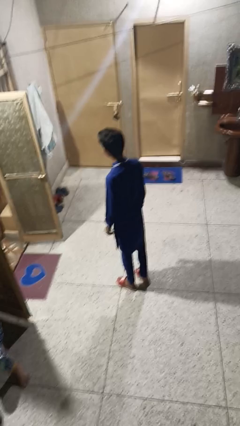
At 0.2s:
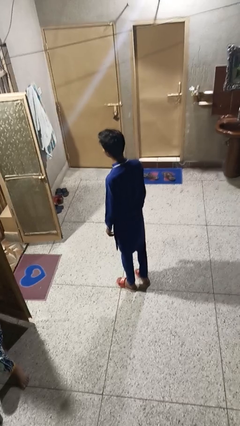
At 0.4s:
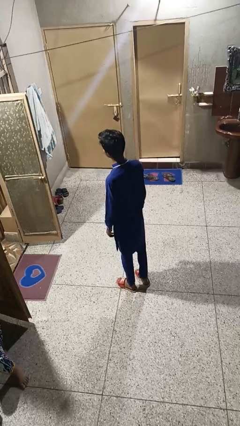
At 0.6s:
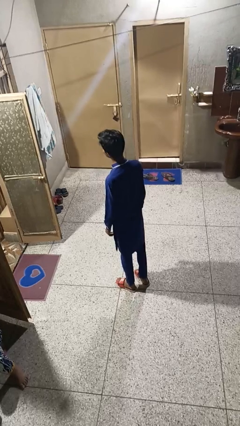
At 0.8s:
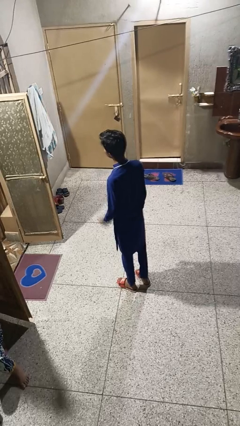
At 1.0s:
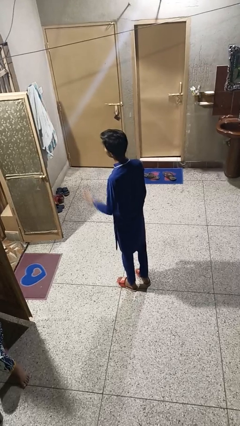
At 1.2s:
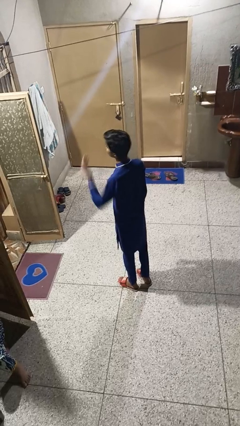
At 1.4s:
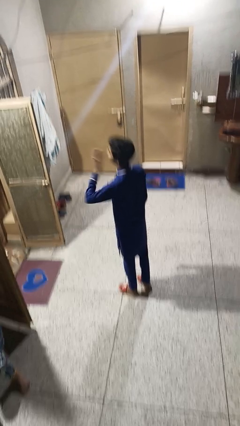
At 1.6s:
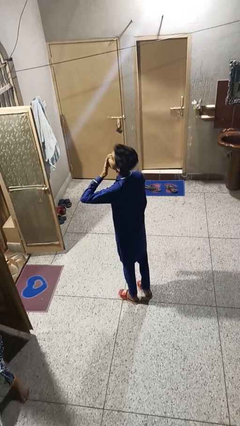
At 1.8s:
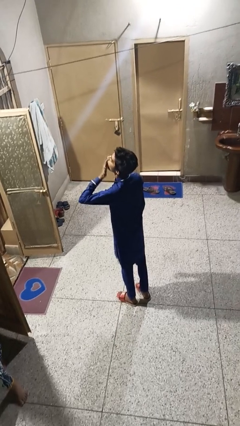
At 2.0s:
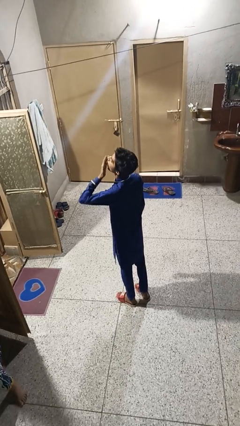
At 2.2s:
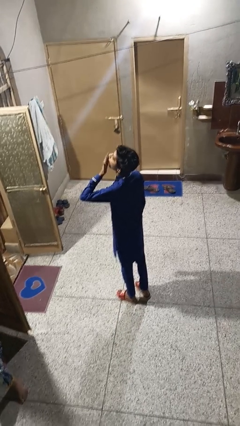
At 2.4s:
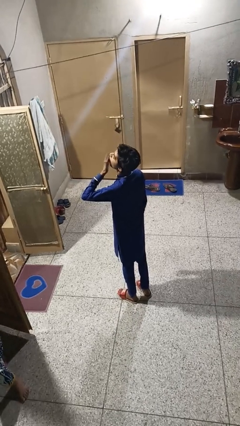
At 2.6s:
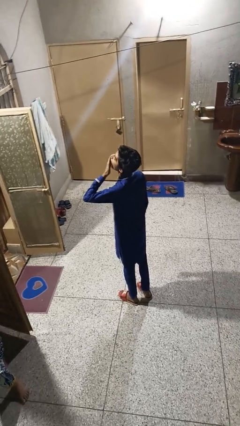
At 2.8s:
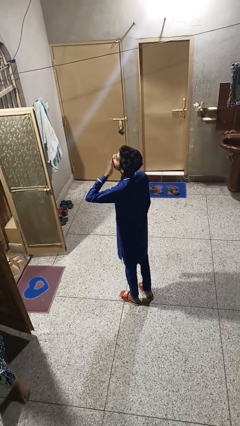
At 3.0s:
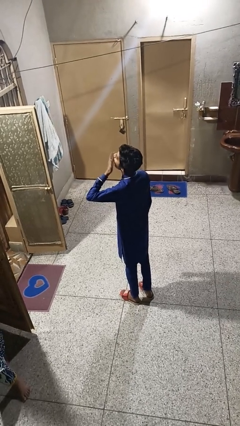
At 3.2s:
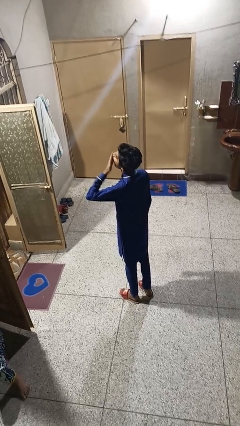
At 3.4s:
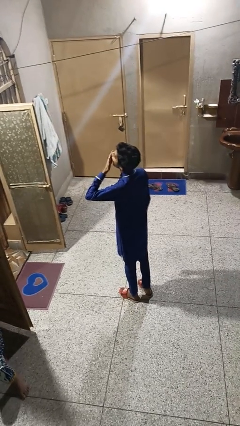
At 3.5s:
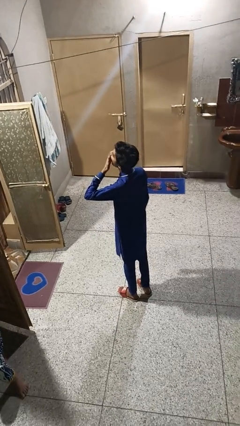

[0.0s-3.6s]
person yawns

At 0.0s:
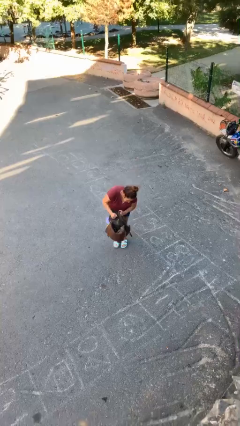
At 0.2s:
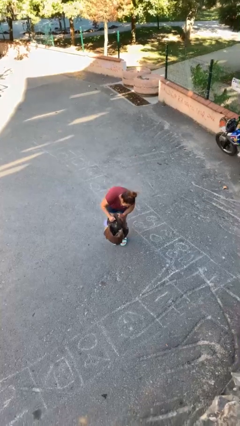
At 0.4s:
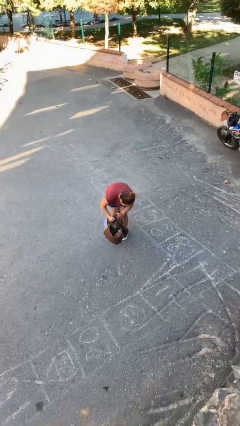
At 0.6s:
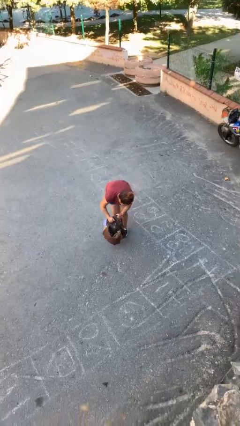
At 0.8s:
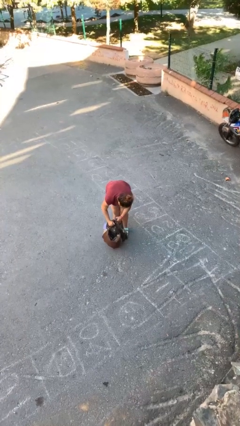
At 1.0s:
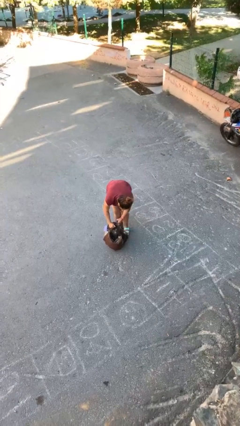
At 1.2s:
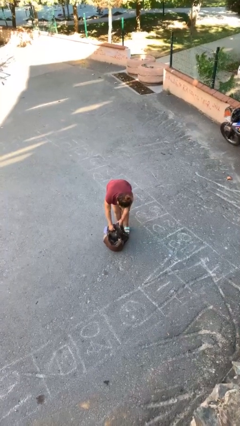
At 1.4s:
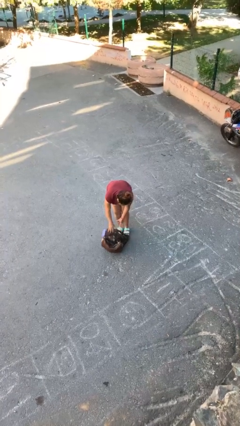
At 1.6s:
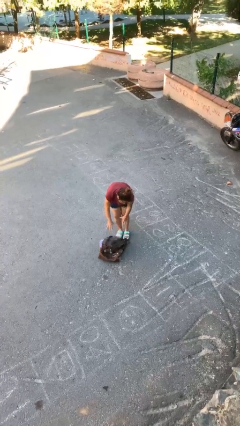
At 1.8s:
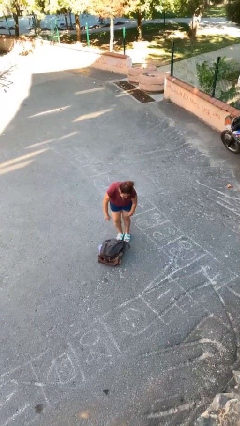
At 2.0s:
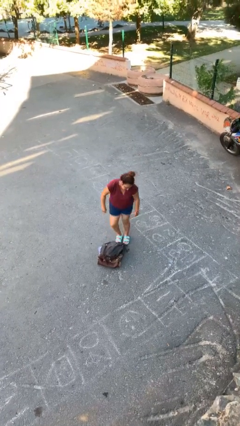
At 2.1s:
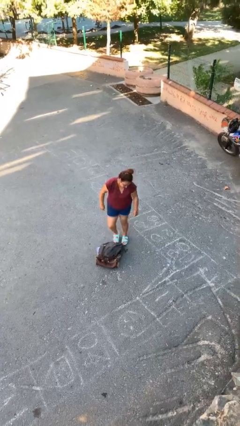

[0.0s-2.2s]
person puts down object on floor

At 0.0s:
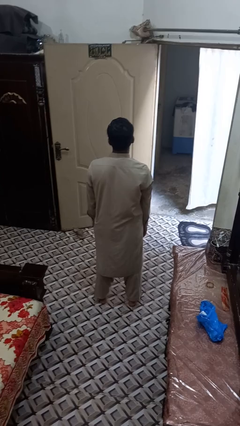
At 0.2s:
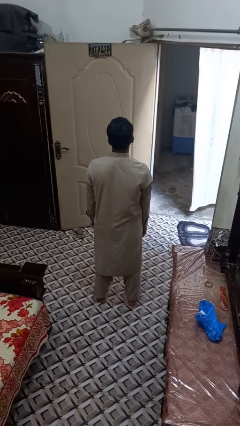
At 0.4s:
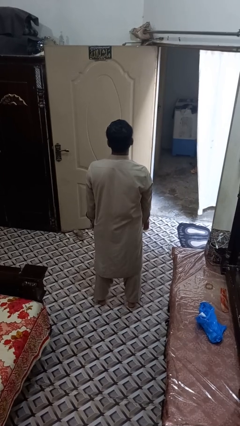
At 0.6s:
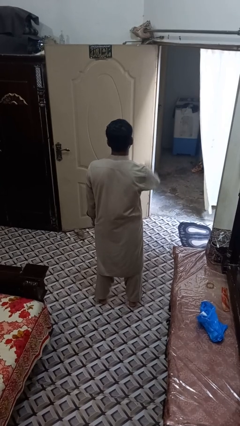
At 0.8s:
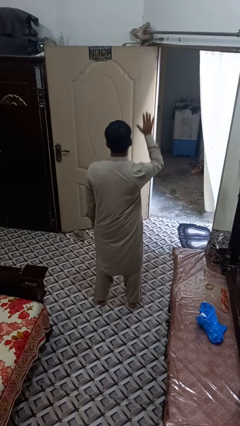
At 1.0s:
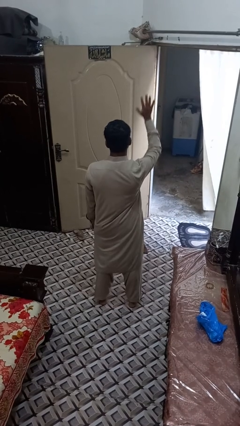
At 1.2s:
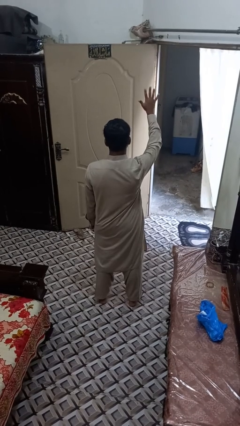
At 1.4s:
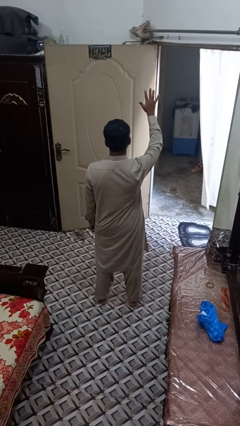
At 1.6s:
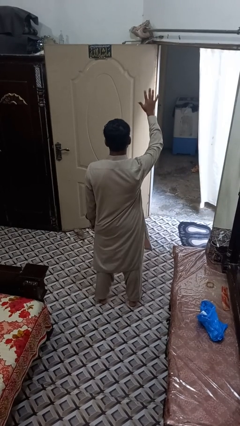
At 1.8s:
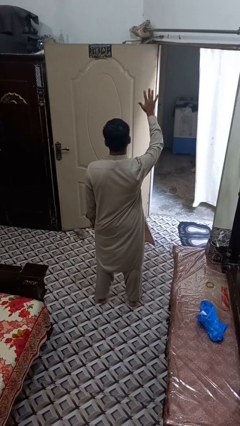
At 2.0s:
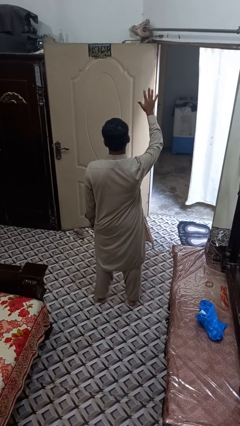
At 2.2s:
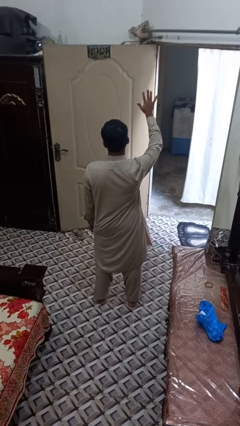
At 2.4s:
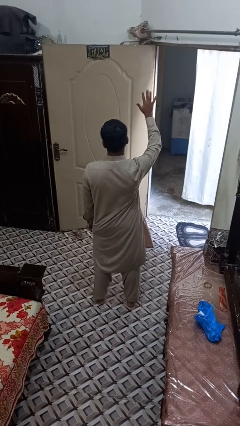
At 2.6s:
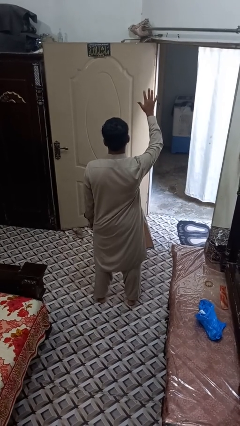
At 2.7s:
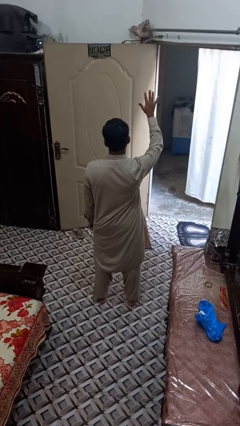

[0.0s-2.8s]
person gestures number five

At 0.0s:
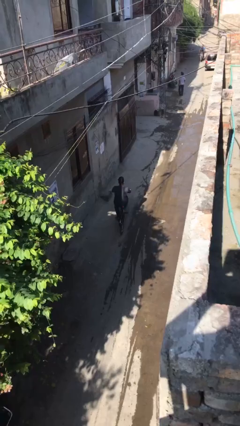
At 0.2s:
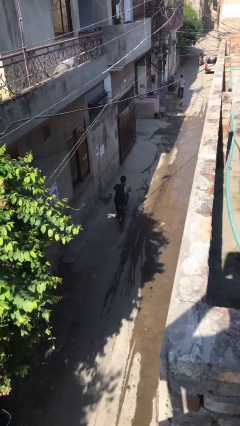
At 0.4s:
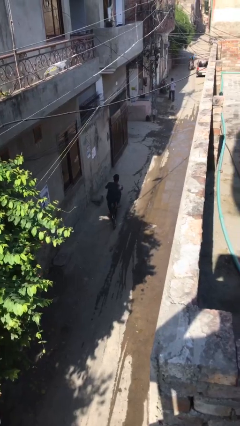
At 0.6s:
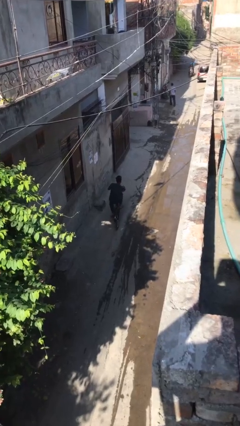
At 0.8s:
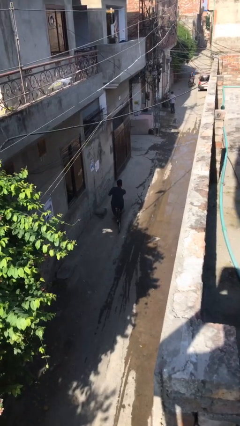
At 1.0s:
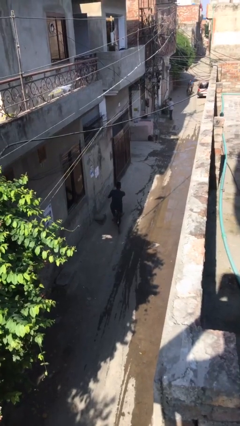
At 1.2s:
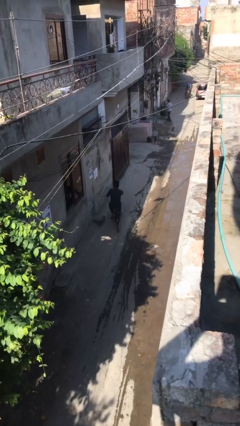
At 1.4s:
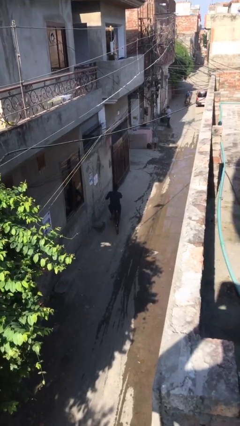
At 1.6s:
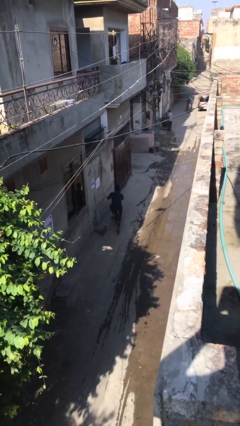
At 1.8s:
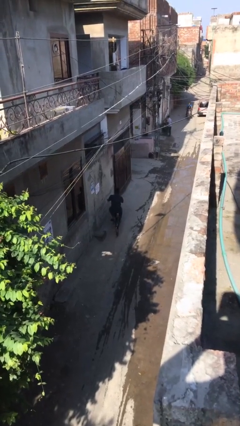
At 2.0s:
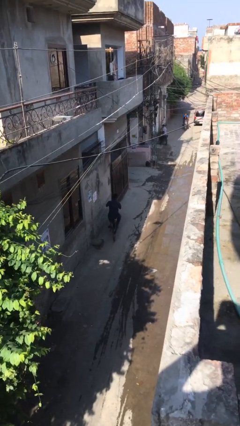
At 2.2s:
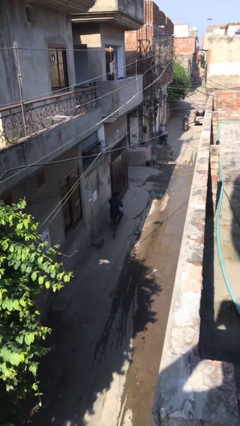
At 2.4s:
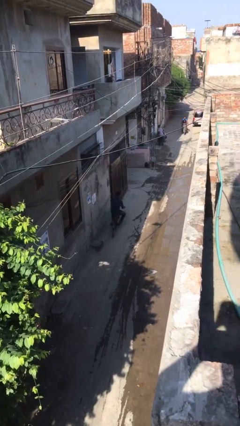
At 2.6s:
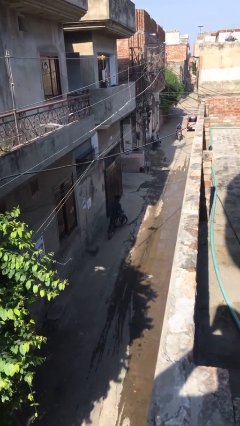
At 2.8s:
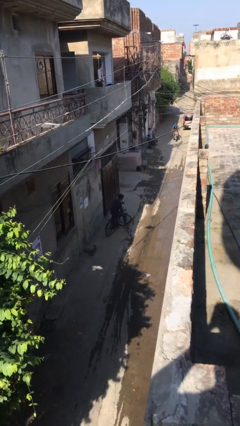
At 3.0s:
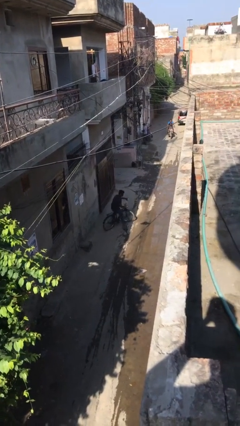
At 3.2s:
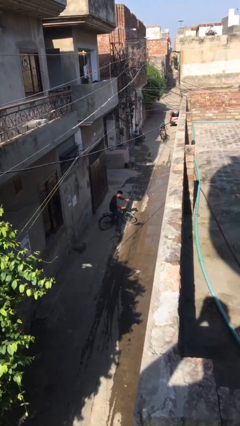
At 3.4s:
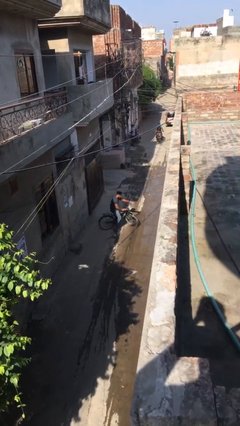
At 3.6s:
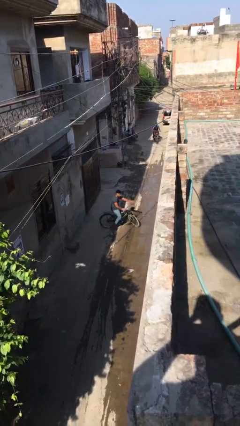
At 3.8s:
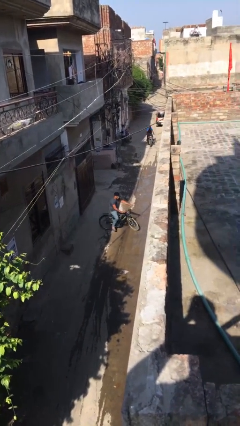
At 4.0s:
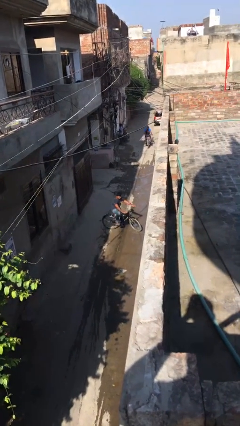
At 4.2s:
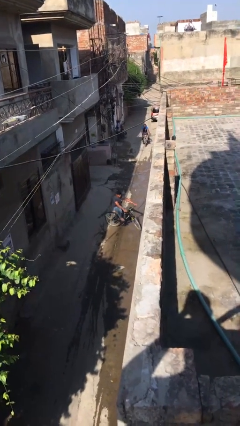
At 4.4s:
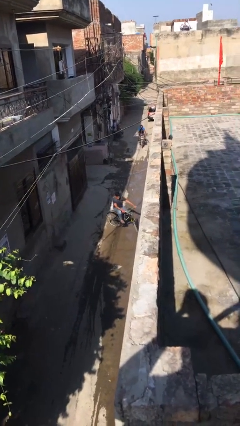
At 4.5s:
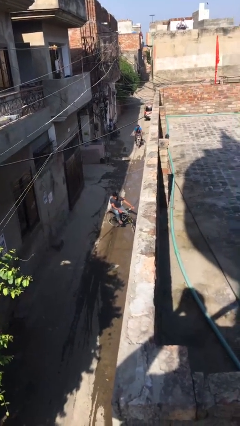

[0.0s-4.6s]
person rides bicycle

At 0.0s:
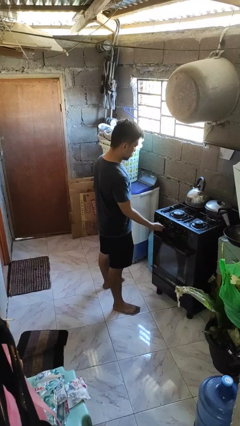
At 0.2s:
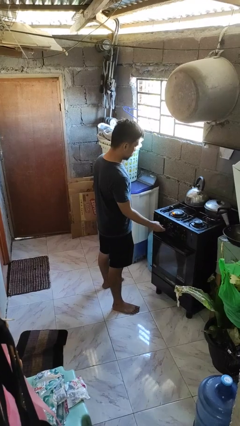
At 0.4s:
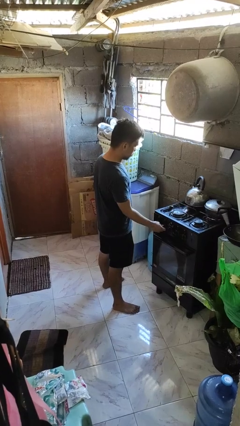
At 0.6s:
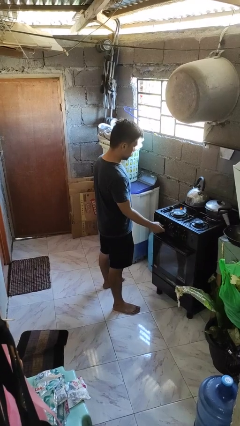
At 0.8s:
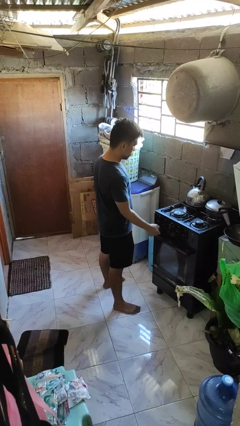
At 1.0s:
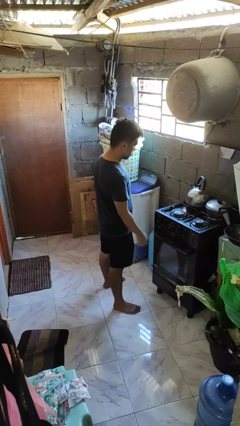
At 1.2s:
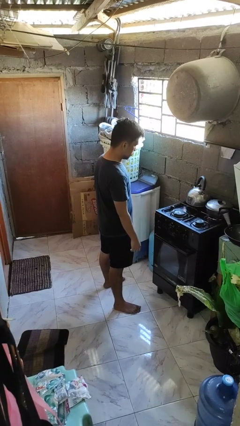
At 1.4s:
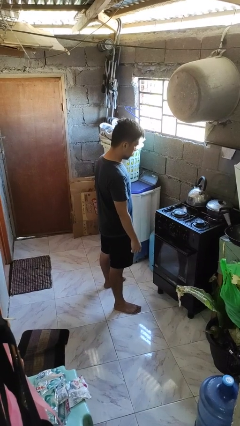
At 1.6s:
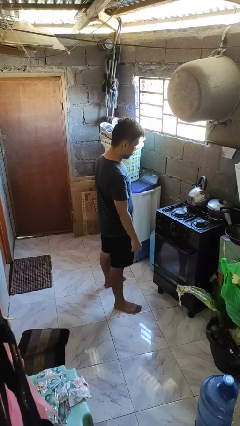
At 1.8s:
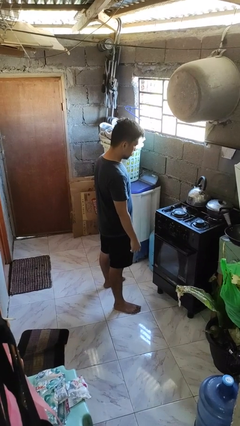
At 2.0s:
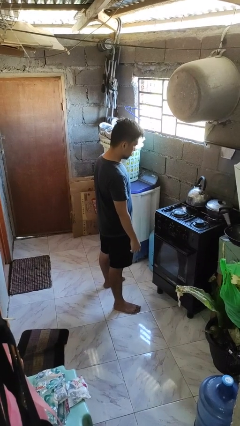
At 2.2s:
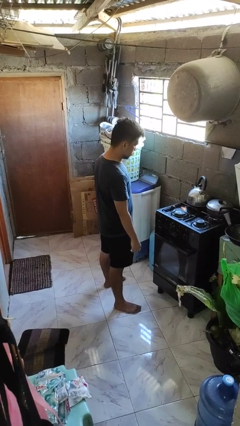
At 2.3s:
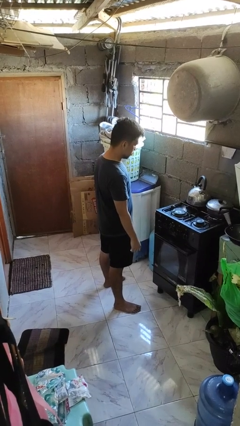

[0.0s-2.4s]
person turns on stovetop

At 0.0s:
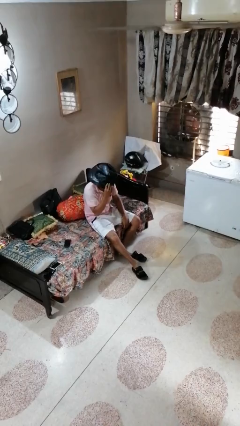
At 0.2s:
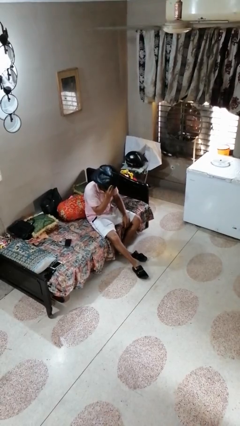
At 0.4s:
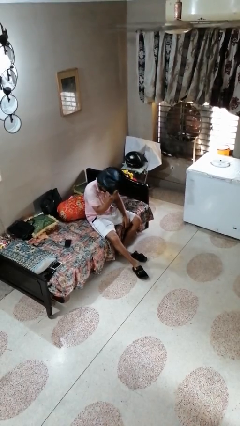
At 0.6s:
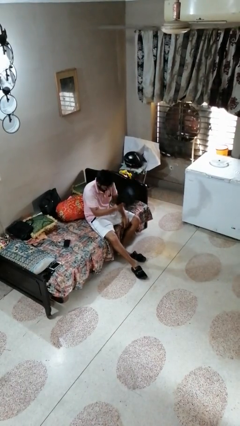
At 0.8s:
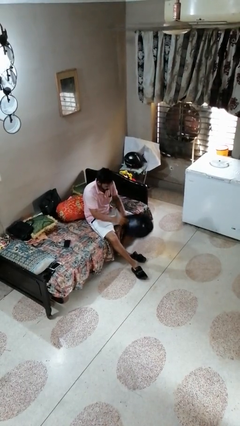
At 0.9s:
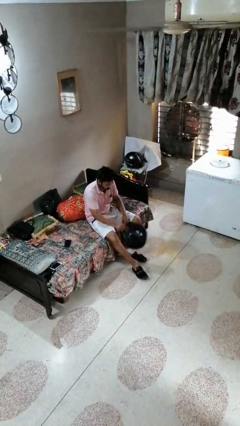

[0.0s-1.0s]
person takes off hat

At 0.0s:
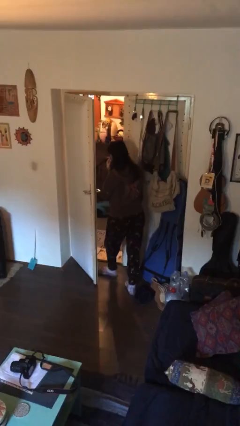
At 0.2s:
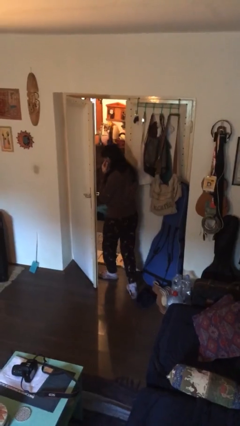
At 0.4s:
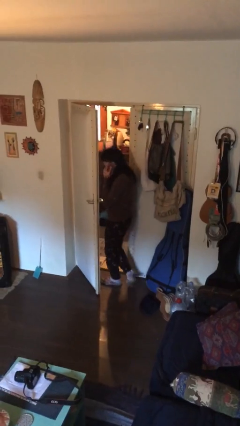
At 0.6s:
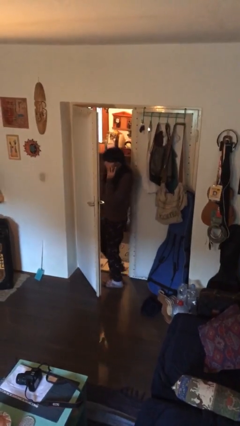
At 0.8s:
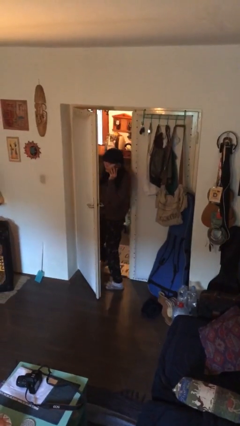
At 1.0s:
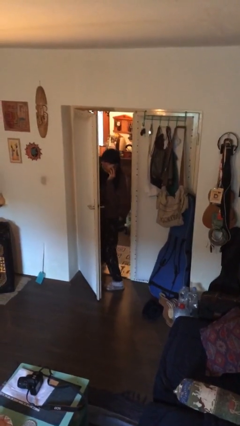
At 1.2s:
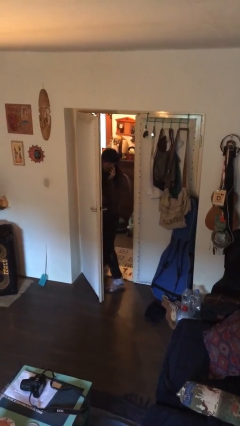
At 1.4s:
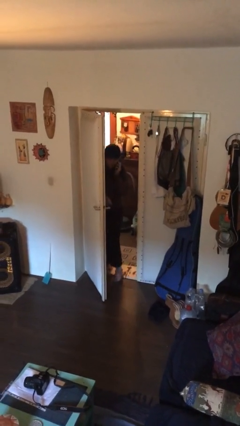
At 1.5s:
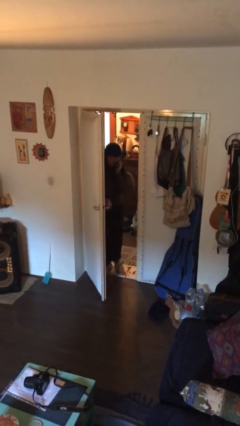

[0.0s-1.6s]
person exits scene through structure
